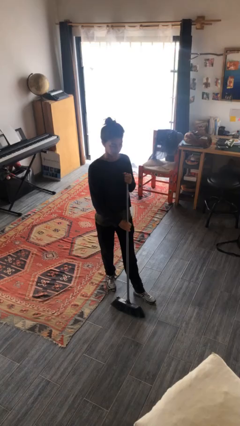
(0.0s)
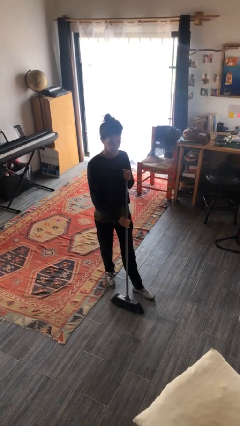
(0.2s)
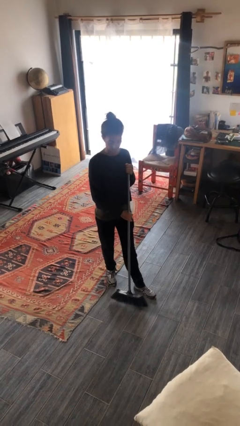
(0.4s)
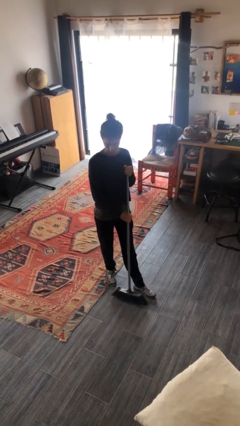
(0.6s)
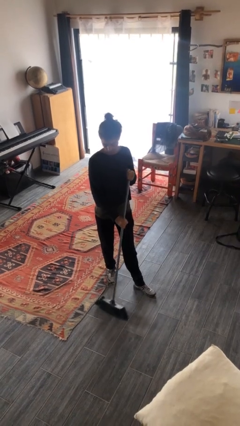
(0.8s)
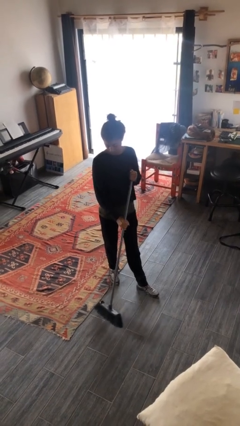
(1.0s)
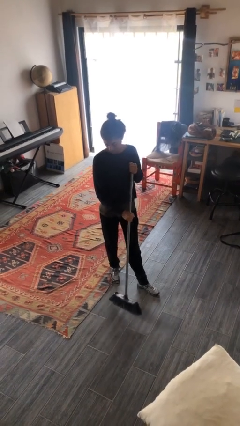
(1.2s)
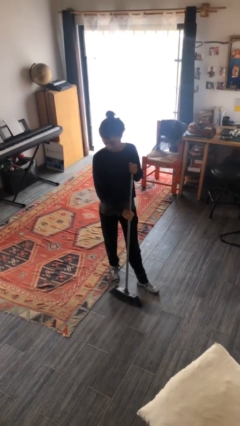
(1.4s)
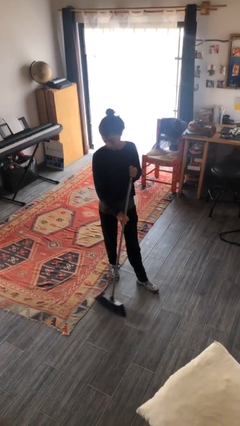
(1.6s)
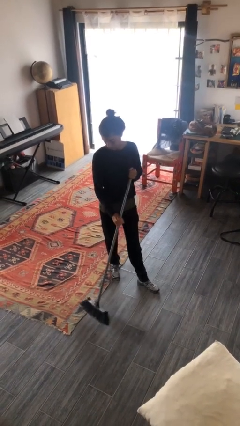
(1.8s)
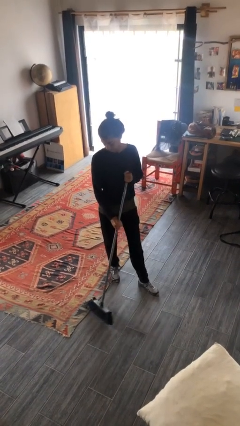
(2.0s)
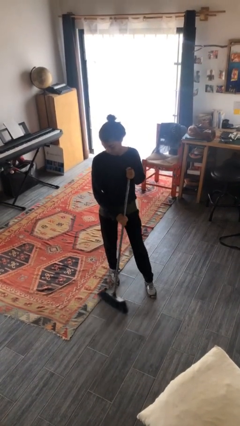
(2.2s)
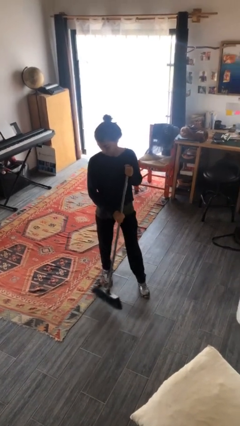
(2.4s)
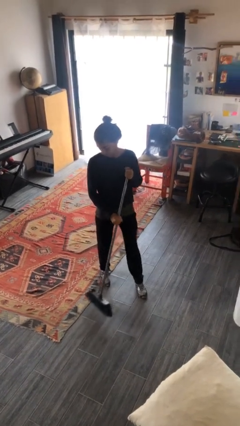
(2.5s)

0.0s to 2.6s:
person sweeps floor

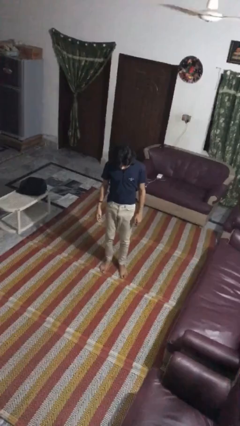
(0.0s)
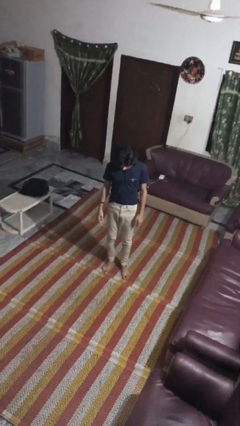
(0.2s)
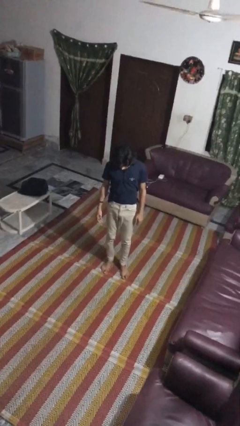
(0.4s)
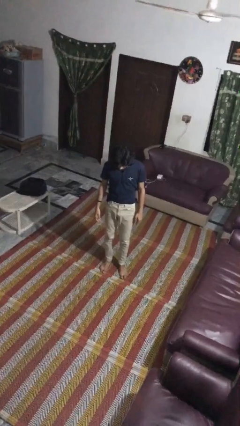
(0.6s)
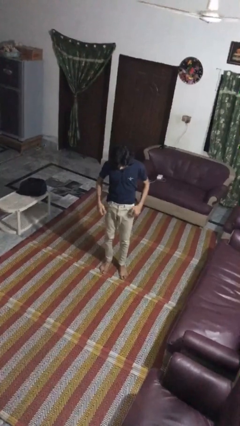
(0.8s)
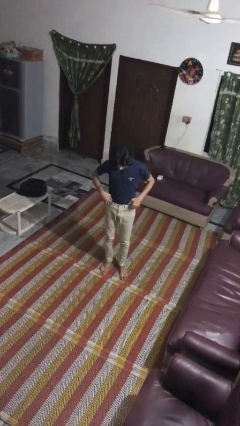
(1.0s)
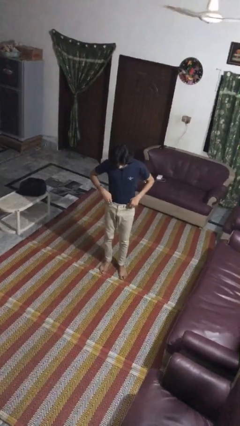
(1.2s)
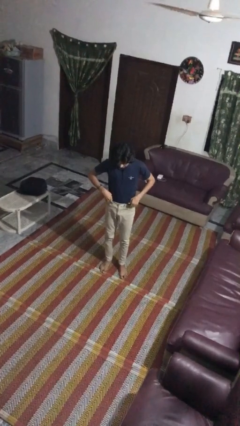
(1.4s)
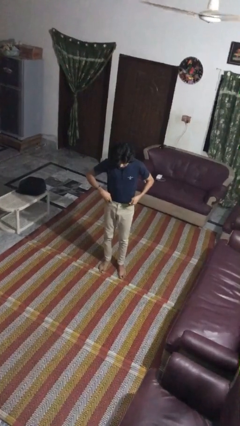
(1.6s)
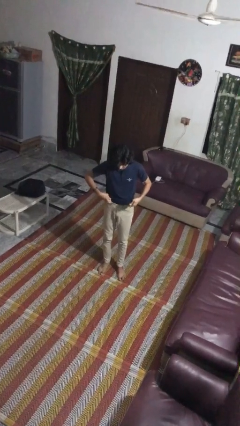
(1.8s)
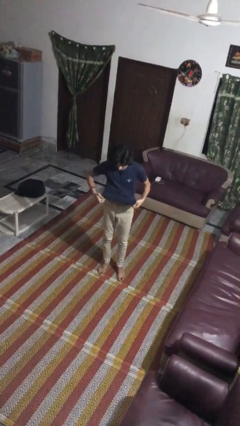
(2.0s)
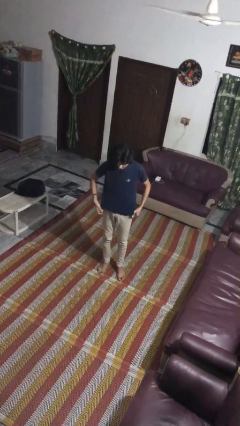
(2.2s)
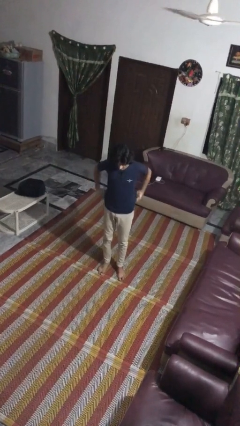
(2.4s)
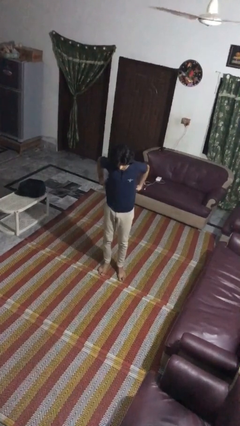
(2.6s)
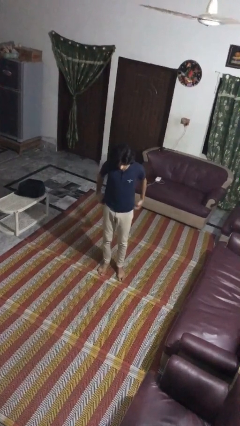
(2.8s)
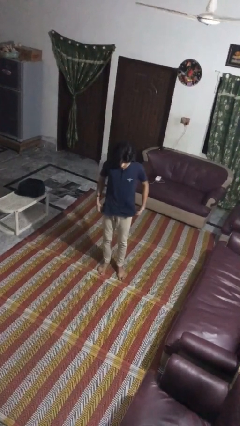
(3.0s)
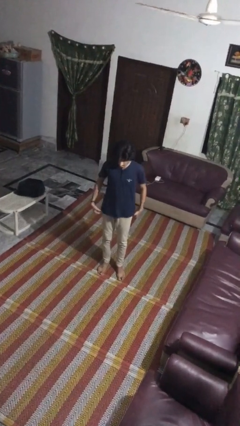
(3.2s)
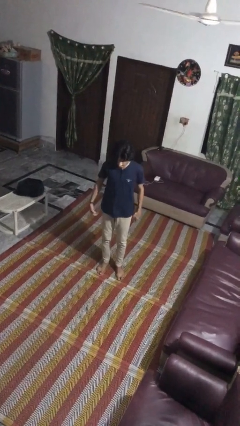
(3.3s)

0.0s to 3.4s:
person untucks shirt

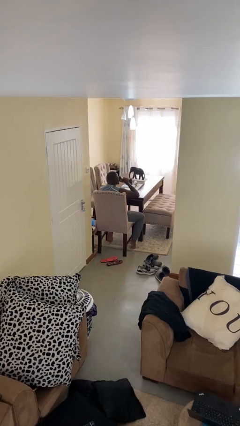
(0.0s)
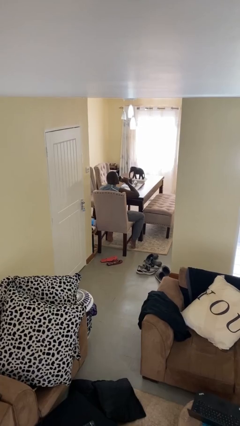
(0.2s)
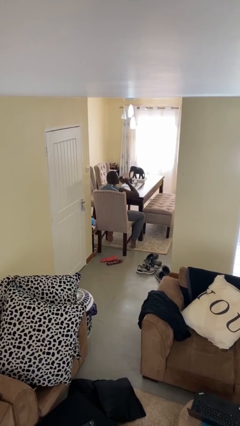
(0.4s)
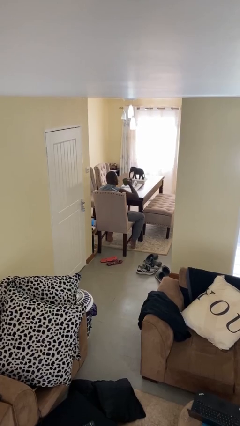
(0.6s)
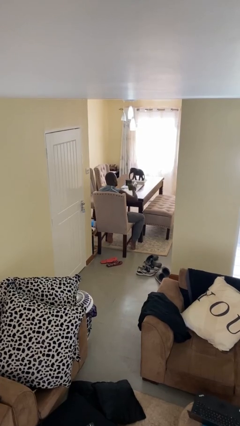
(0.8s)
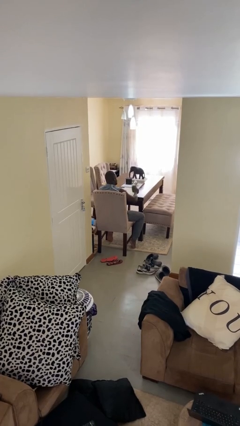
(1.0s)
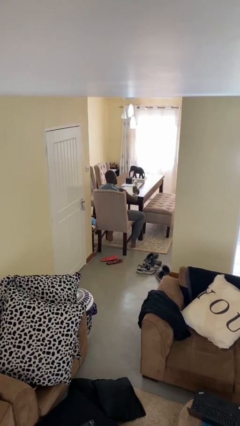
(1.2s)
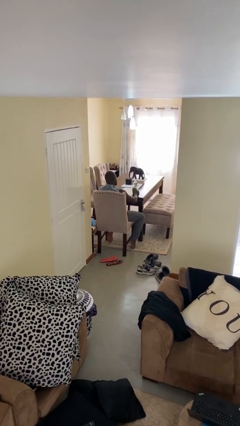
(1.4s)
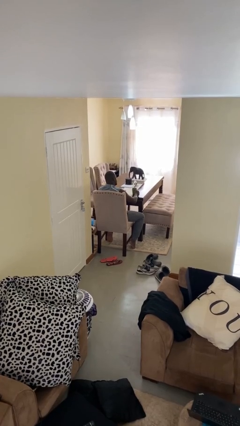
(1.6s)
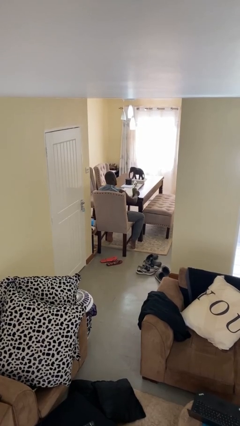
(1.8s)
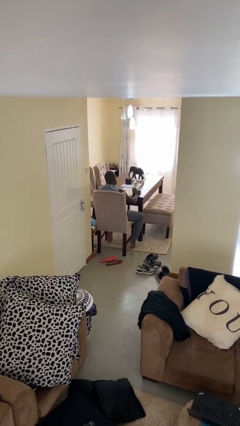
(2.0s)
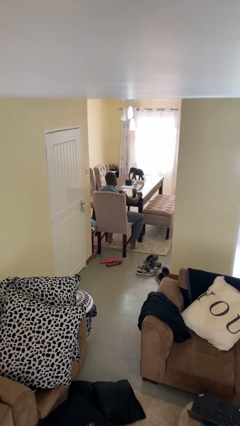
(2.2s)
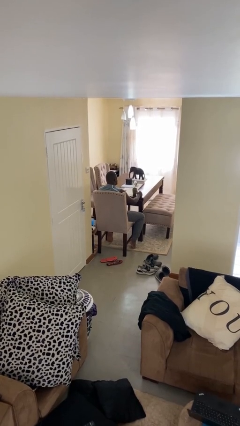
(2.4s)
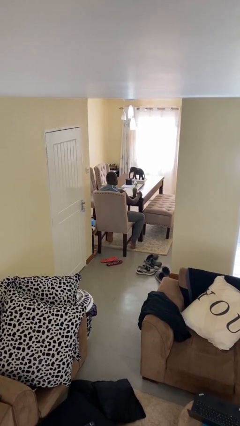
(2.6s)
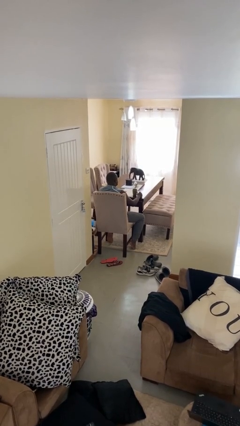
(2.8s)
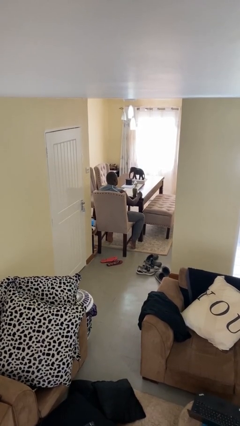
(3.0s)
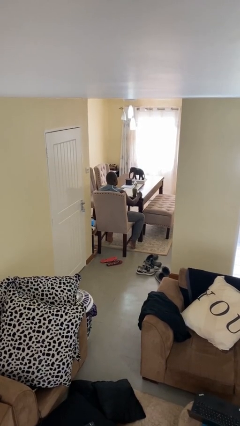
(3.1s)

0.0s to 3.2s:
person puts down object on table

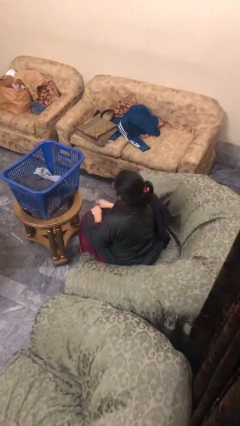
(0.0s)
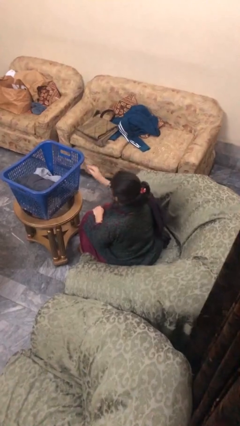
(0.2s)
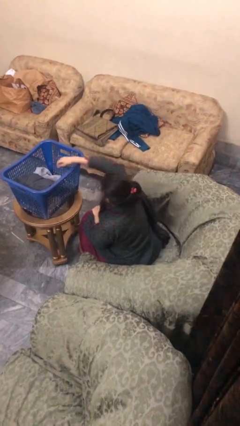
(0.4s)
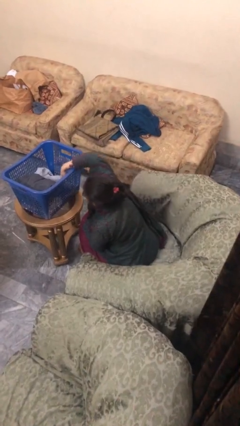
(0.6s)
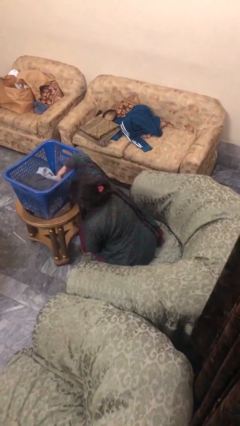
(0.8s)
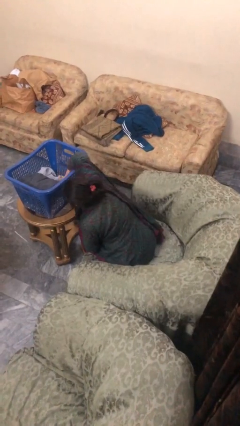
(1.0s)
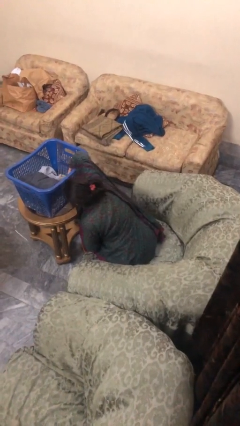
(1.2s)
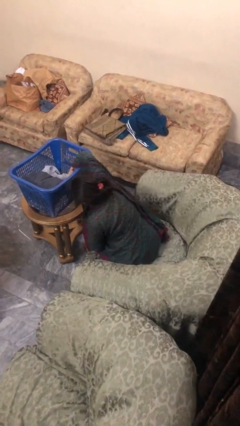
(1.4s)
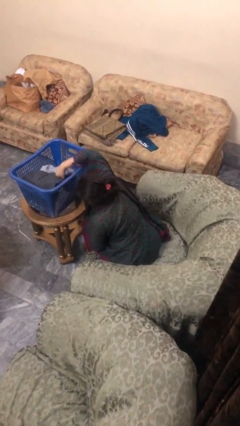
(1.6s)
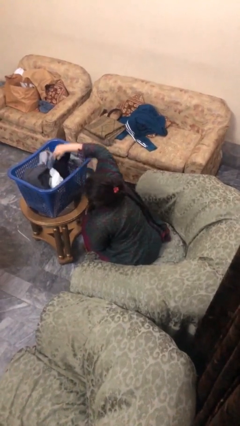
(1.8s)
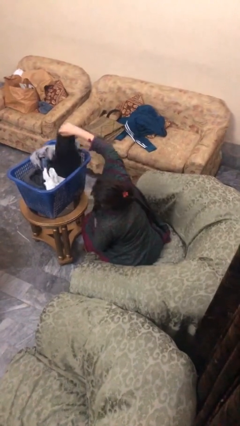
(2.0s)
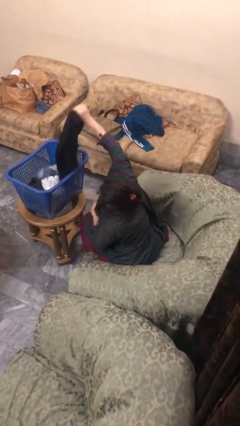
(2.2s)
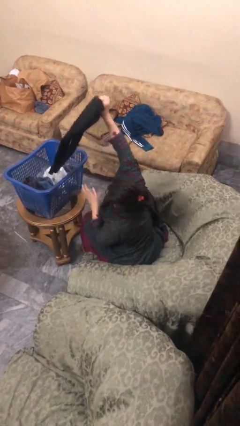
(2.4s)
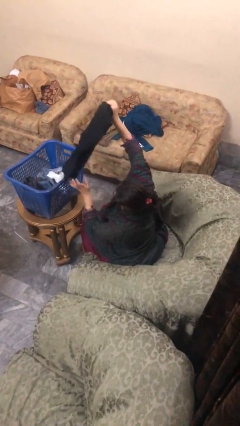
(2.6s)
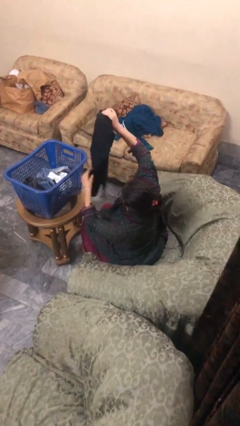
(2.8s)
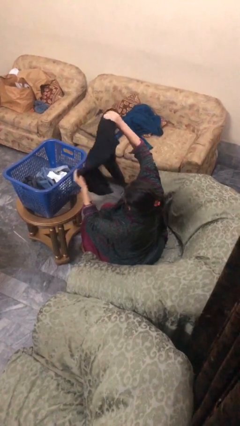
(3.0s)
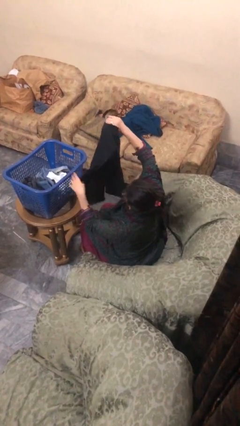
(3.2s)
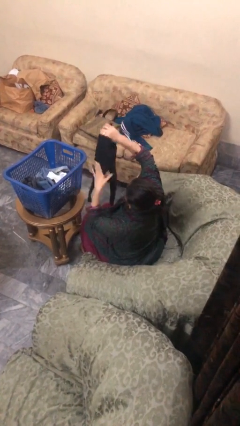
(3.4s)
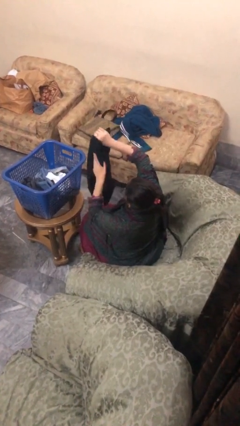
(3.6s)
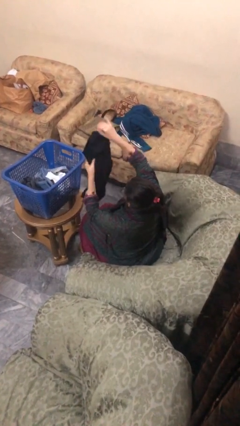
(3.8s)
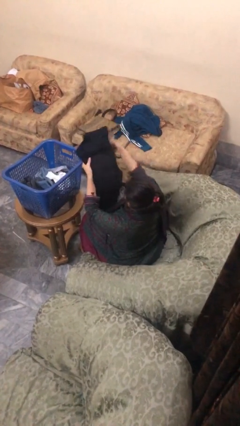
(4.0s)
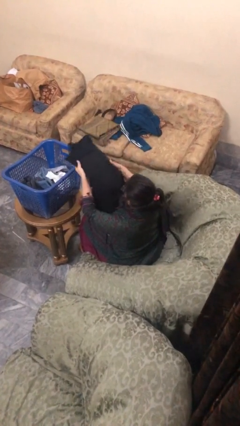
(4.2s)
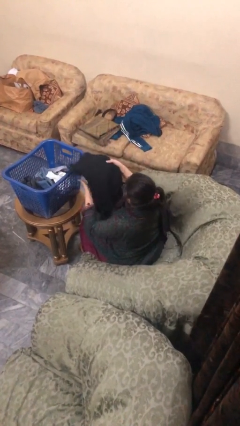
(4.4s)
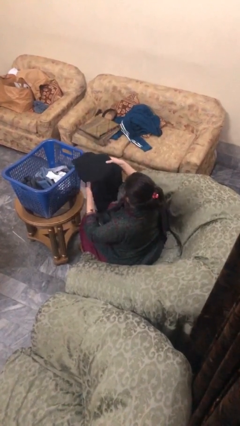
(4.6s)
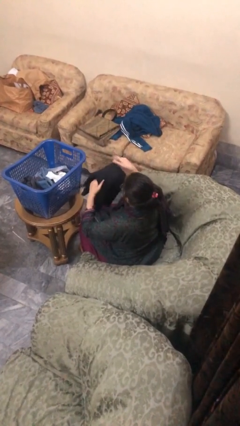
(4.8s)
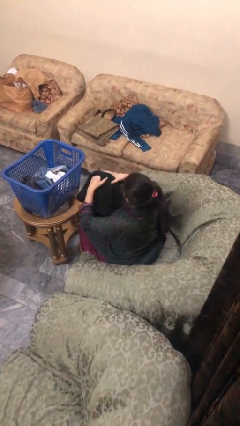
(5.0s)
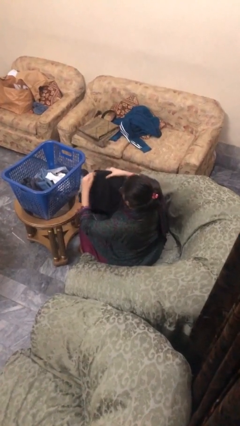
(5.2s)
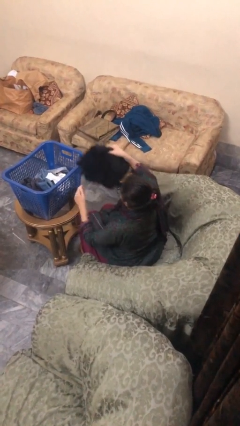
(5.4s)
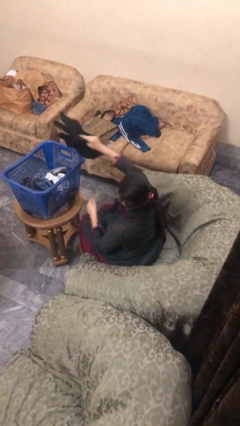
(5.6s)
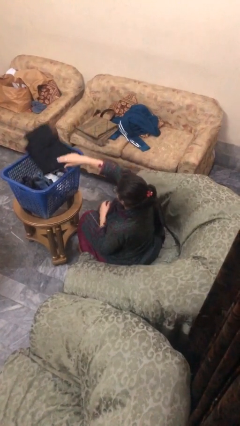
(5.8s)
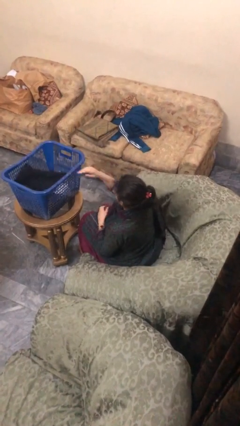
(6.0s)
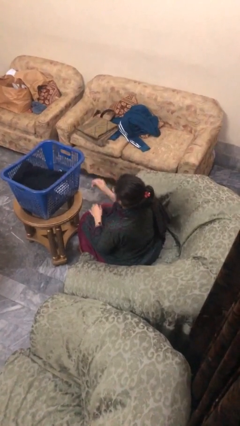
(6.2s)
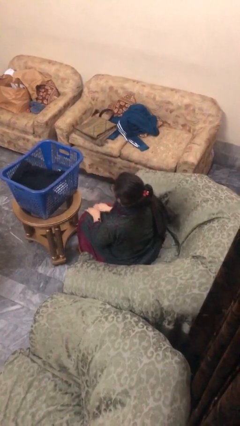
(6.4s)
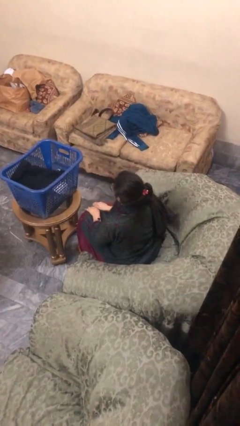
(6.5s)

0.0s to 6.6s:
person folds pants

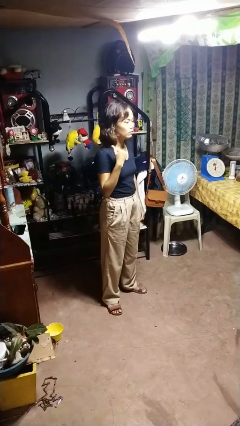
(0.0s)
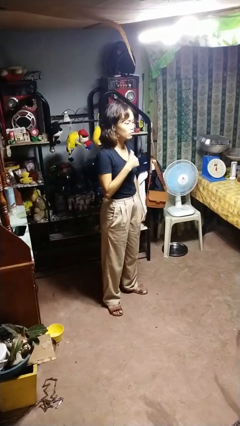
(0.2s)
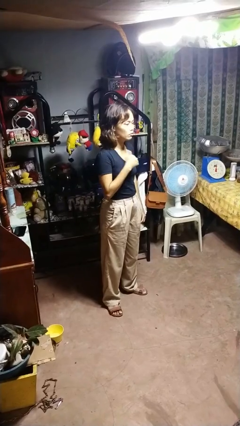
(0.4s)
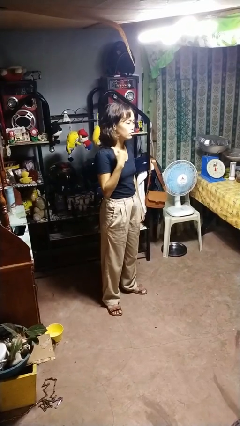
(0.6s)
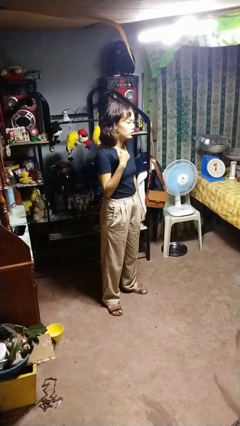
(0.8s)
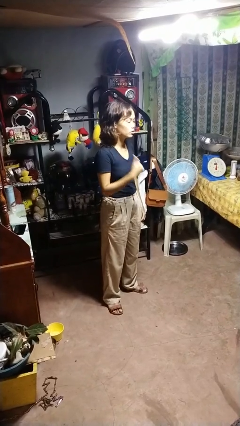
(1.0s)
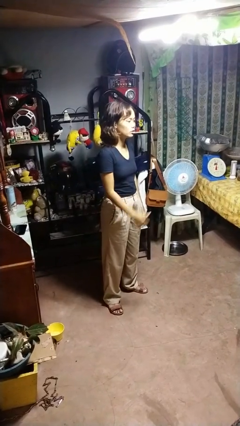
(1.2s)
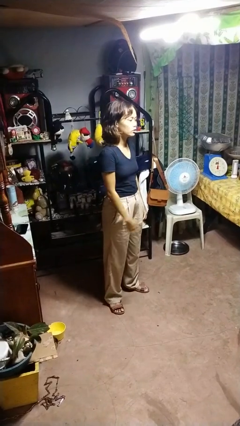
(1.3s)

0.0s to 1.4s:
person gestures cut

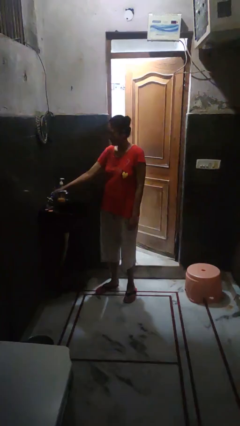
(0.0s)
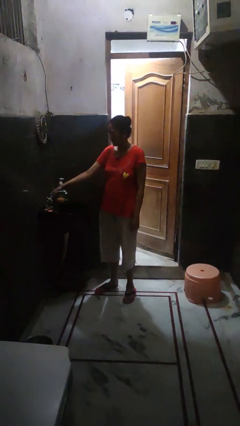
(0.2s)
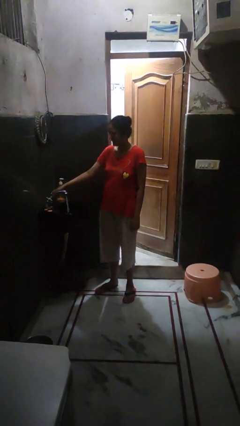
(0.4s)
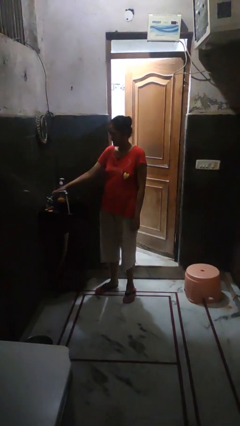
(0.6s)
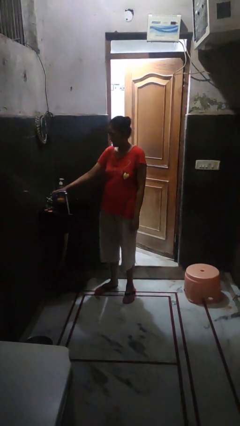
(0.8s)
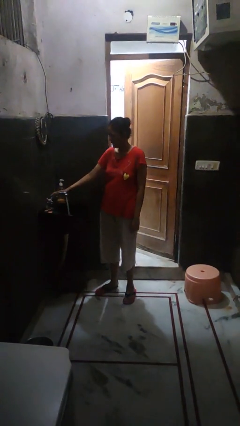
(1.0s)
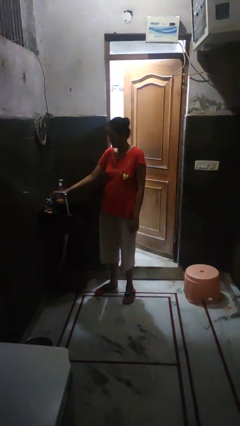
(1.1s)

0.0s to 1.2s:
person turns on faucet
